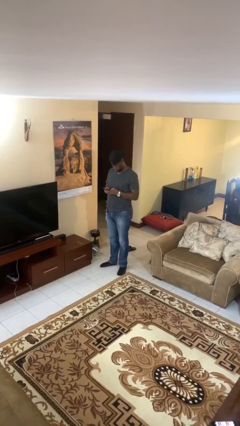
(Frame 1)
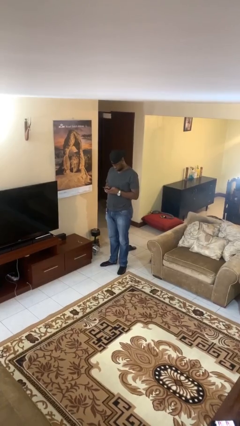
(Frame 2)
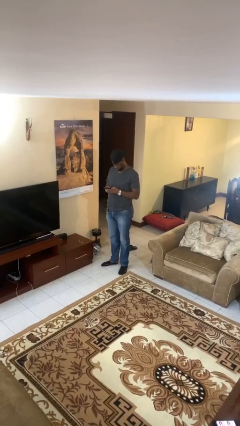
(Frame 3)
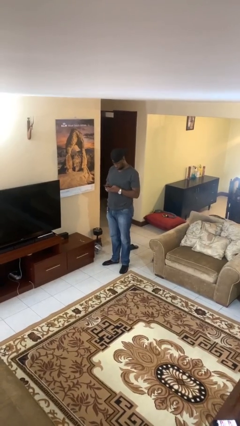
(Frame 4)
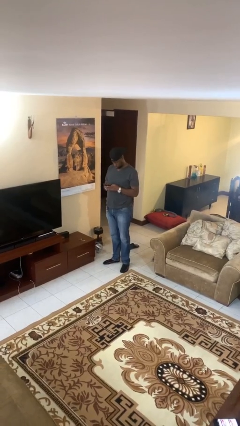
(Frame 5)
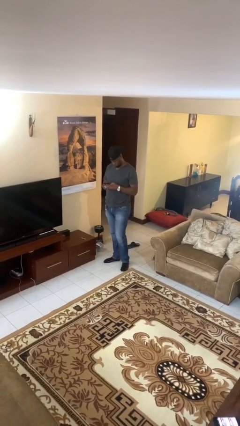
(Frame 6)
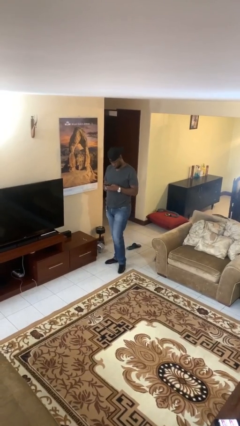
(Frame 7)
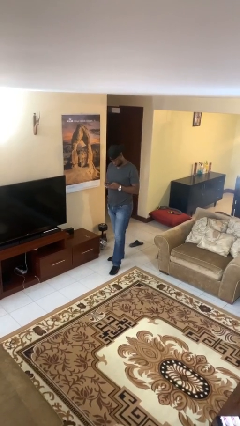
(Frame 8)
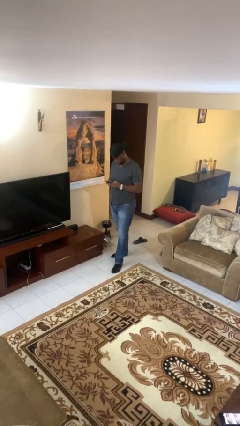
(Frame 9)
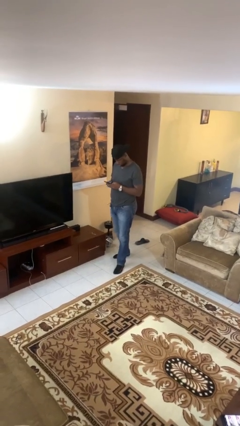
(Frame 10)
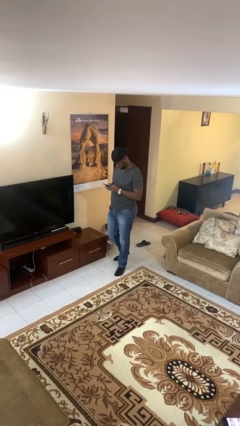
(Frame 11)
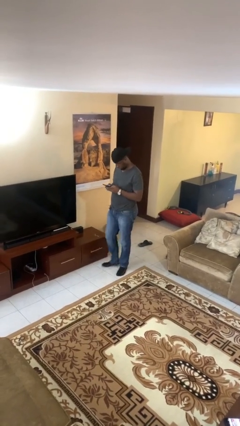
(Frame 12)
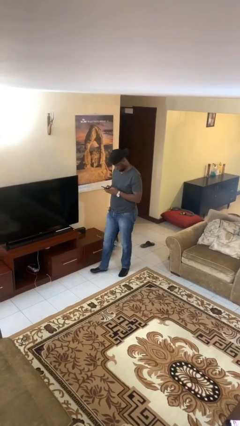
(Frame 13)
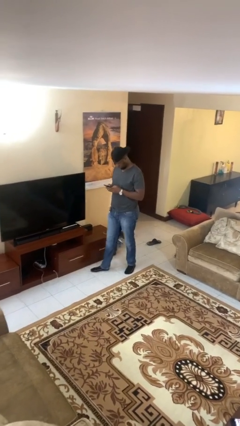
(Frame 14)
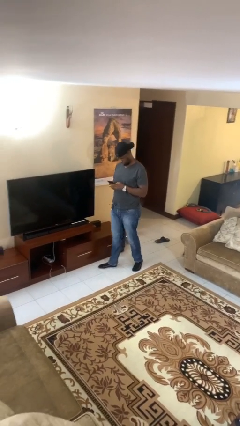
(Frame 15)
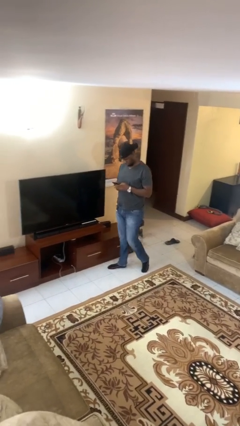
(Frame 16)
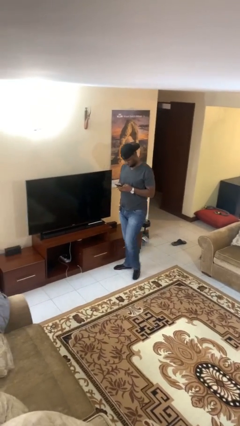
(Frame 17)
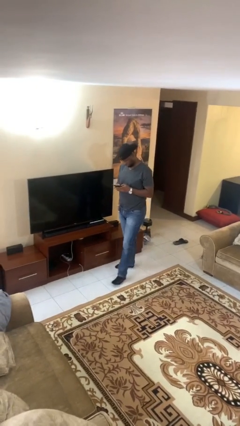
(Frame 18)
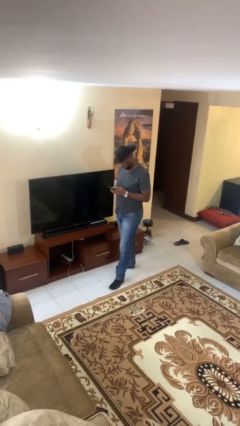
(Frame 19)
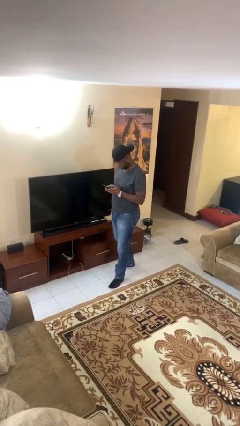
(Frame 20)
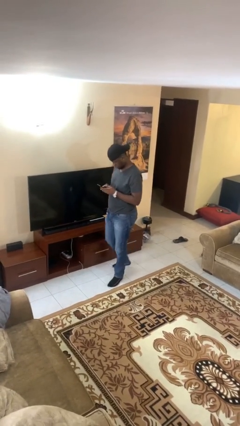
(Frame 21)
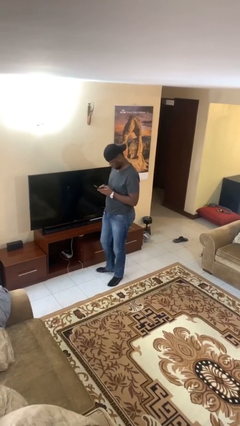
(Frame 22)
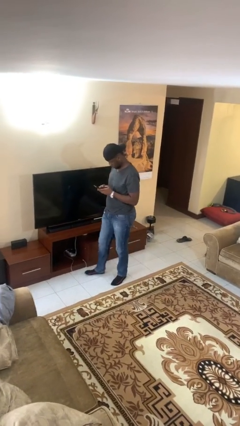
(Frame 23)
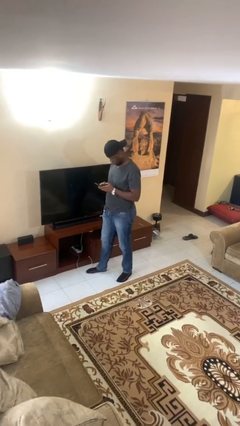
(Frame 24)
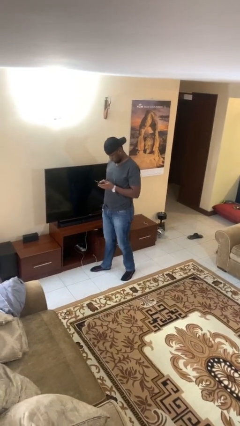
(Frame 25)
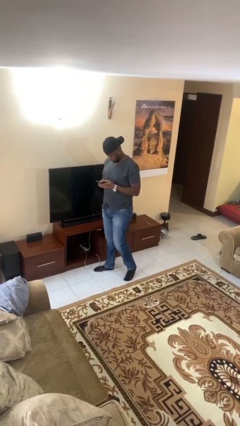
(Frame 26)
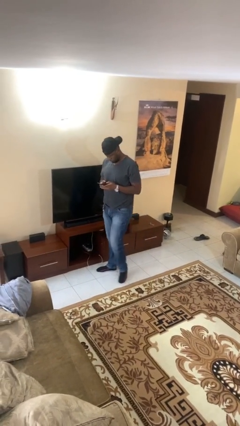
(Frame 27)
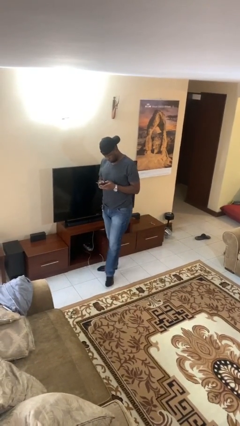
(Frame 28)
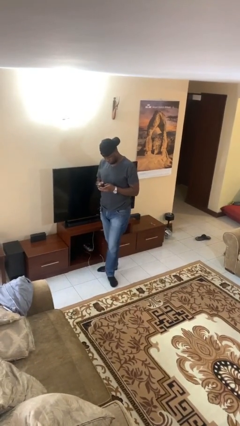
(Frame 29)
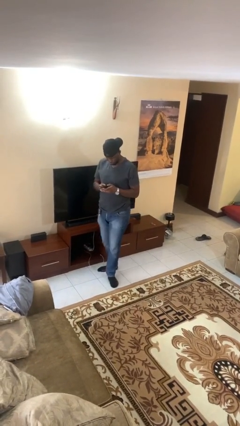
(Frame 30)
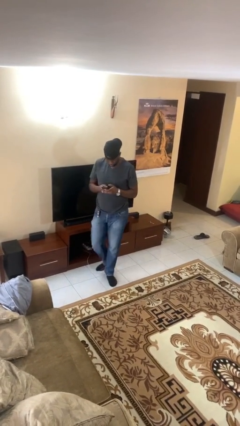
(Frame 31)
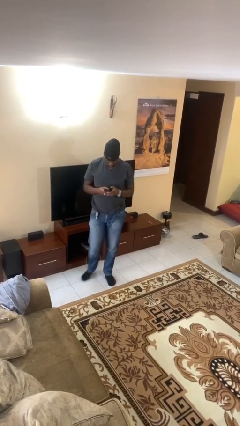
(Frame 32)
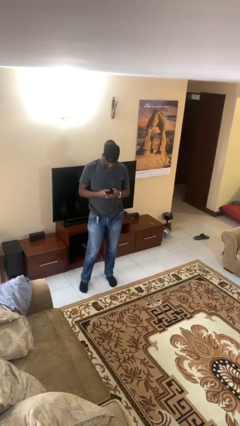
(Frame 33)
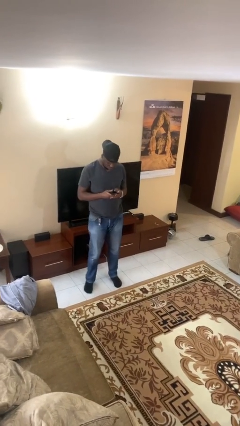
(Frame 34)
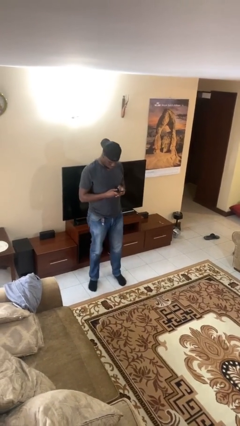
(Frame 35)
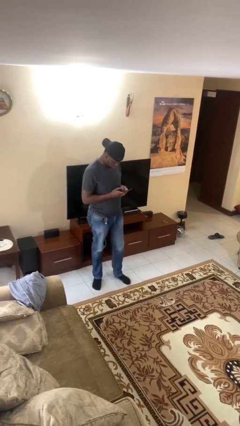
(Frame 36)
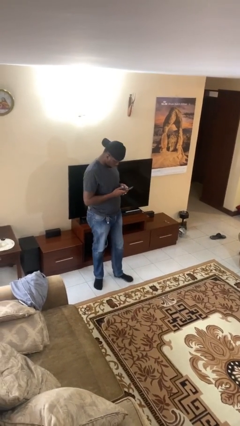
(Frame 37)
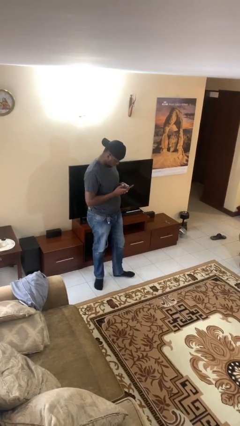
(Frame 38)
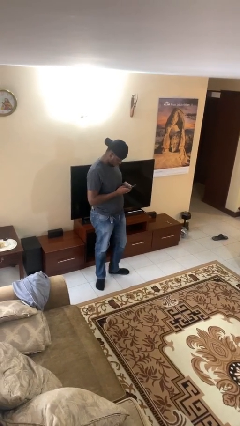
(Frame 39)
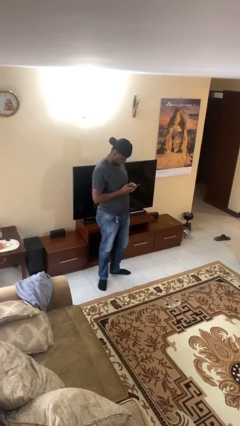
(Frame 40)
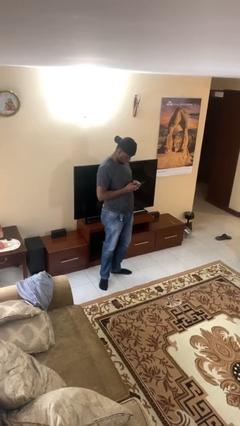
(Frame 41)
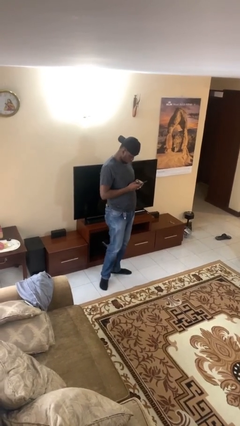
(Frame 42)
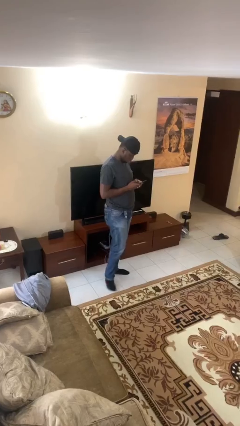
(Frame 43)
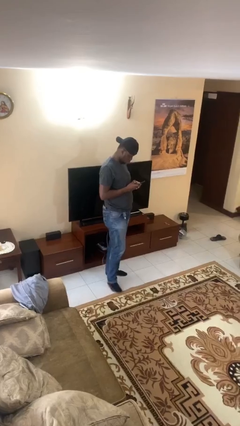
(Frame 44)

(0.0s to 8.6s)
person texts on phone

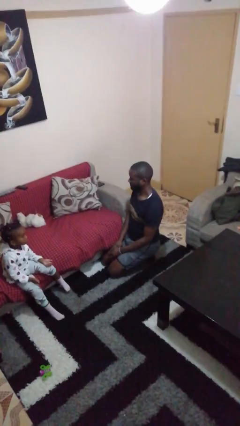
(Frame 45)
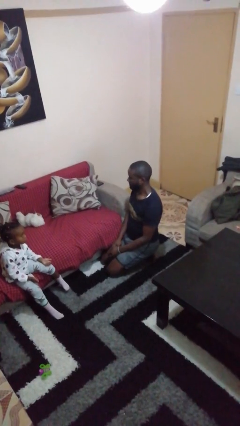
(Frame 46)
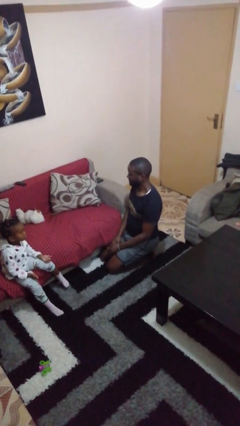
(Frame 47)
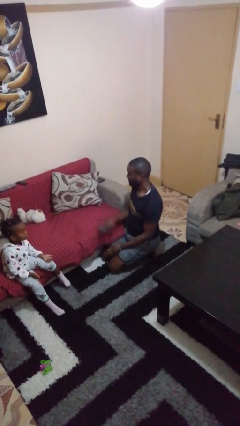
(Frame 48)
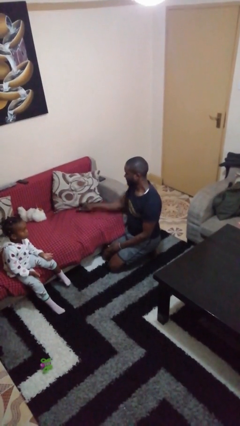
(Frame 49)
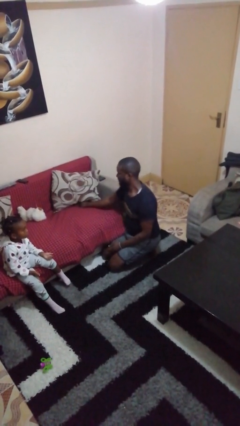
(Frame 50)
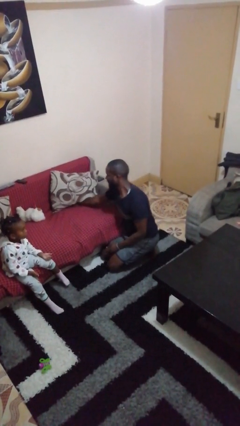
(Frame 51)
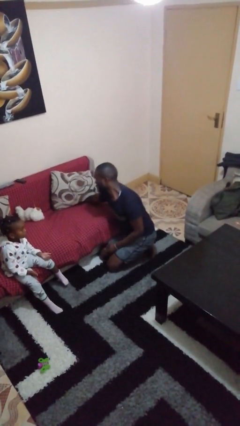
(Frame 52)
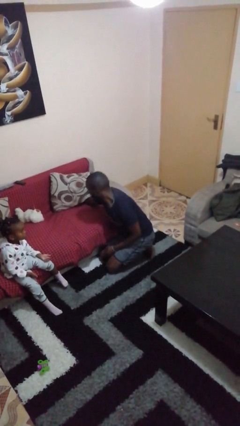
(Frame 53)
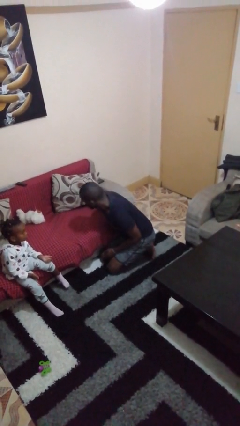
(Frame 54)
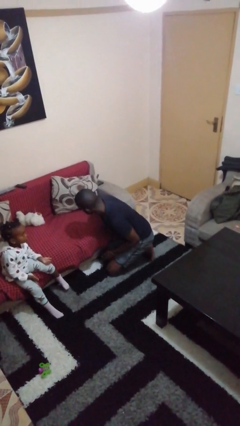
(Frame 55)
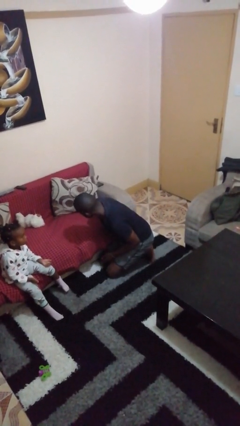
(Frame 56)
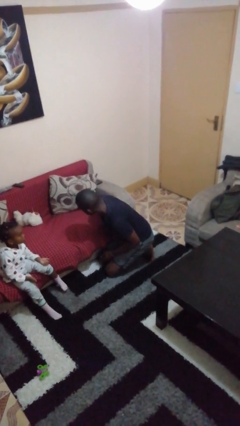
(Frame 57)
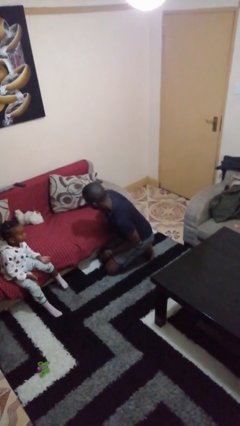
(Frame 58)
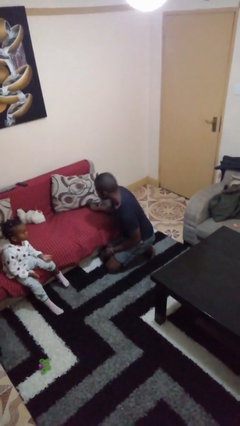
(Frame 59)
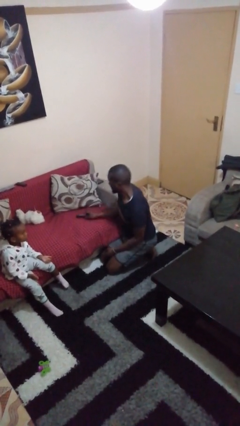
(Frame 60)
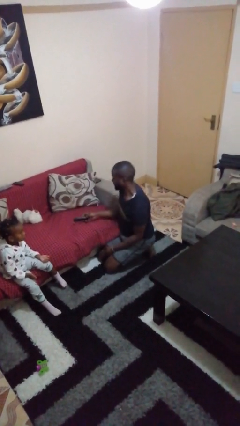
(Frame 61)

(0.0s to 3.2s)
person searches in couch

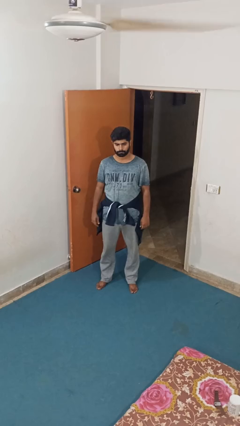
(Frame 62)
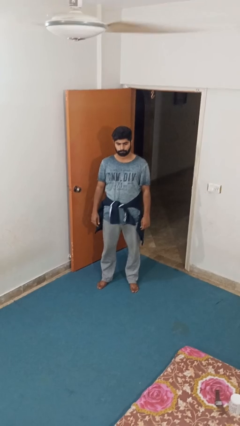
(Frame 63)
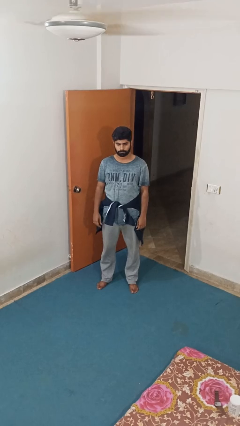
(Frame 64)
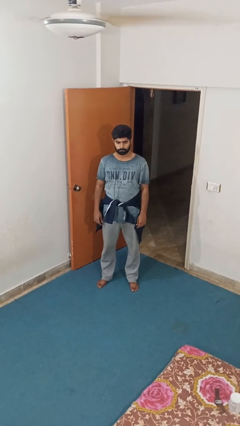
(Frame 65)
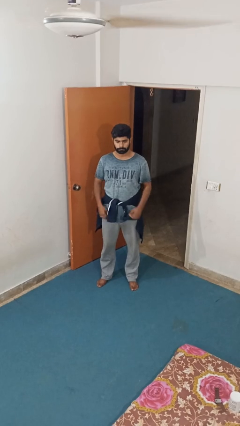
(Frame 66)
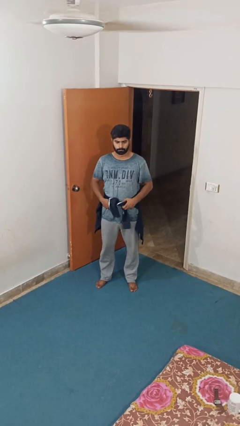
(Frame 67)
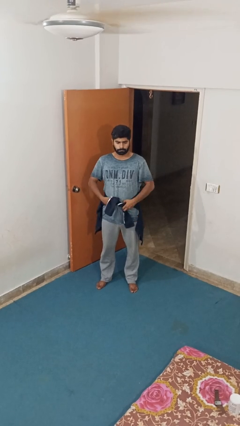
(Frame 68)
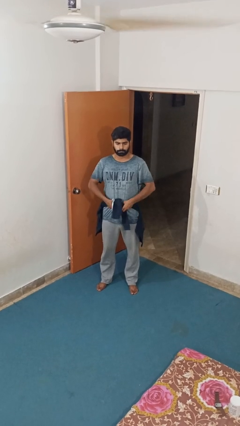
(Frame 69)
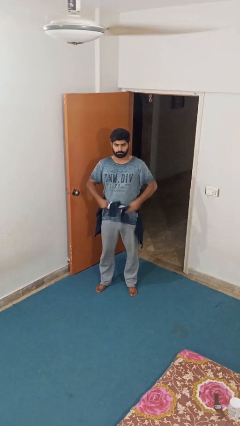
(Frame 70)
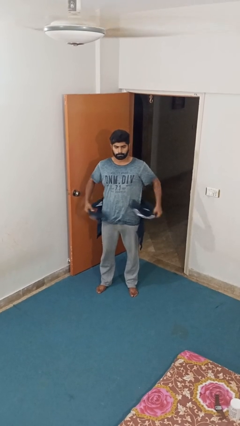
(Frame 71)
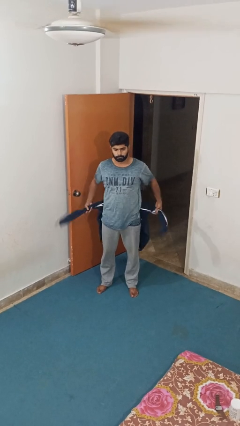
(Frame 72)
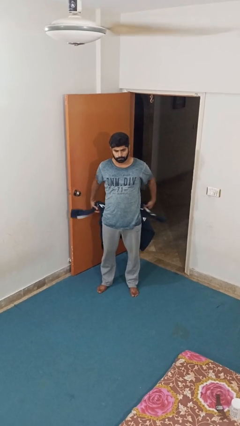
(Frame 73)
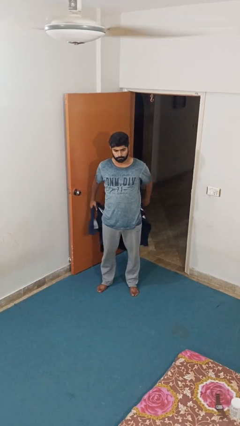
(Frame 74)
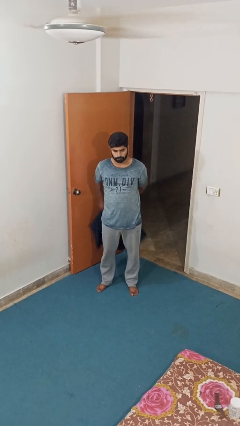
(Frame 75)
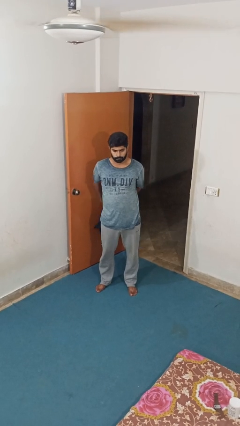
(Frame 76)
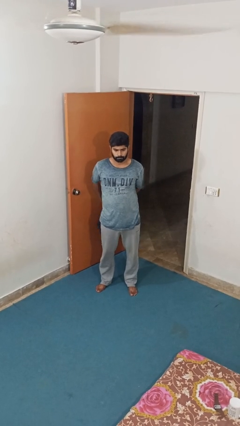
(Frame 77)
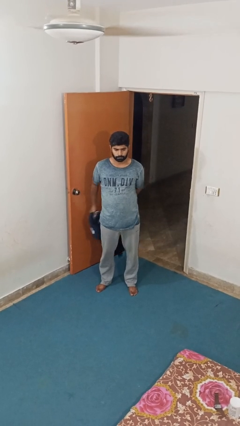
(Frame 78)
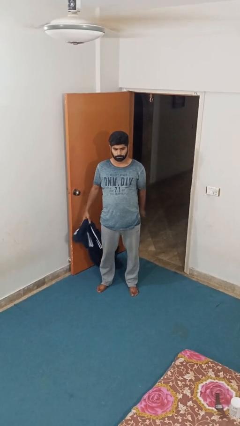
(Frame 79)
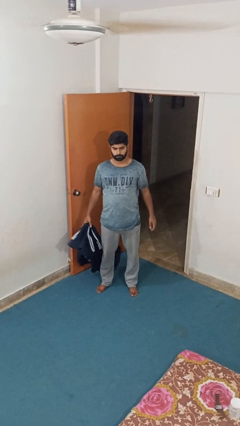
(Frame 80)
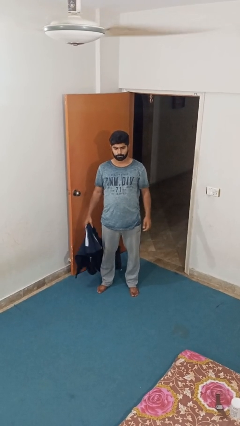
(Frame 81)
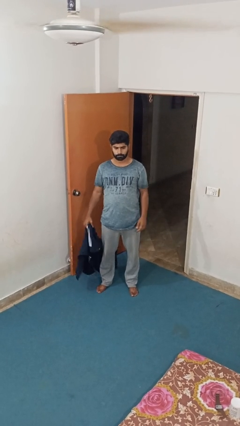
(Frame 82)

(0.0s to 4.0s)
person unties jacket around waist

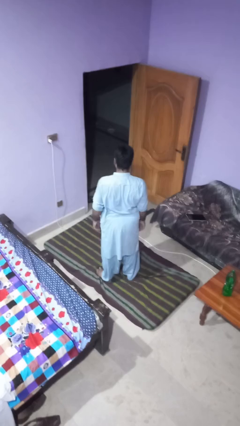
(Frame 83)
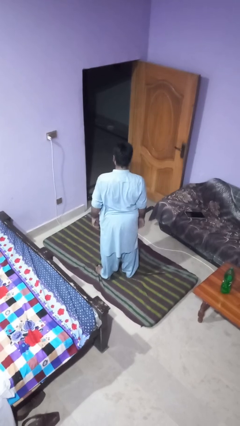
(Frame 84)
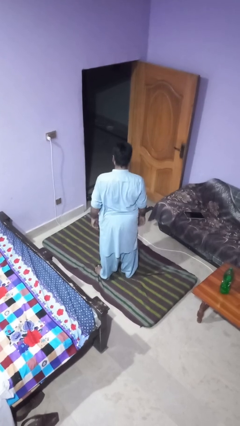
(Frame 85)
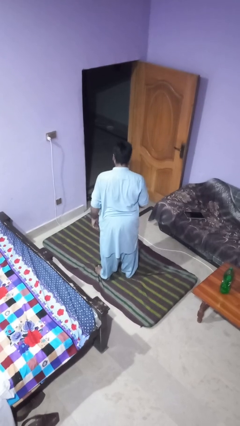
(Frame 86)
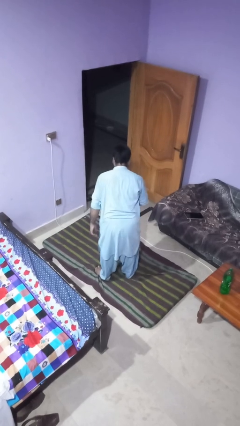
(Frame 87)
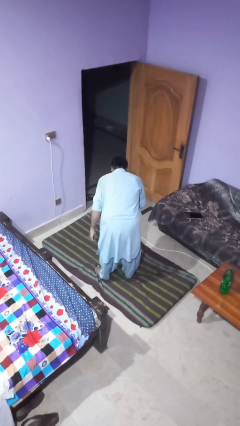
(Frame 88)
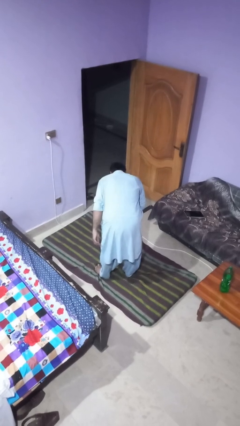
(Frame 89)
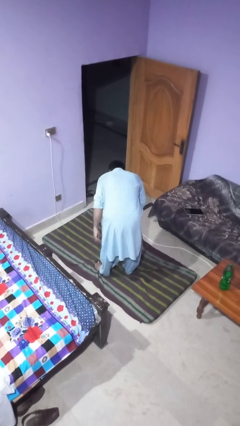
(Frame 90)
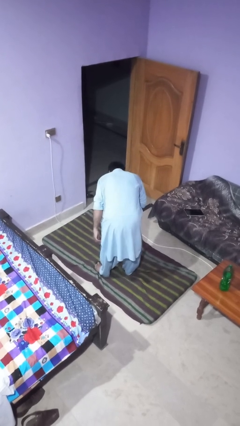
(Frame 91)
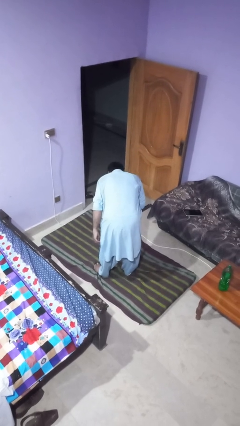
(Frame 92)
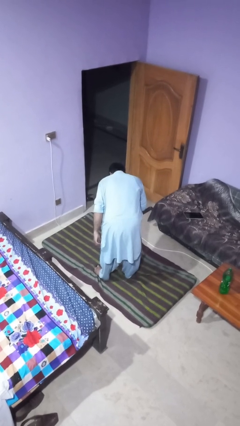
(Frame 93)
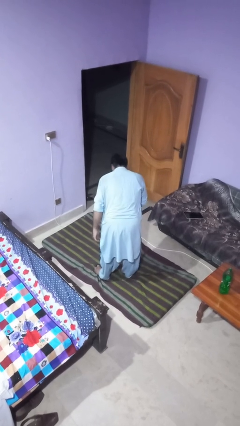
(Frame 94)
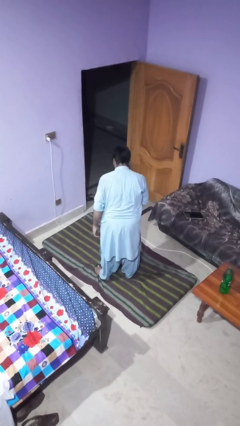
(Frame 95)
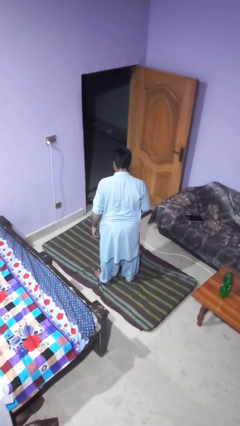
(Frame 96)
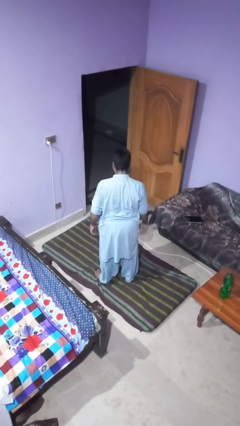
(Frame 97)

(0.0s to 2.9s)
person bows
